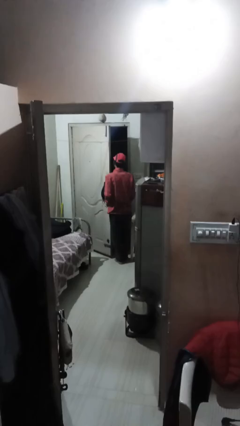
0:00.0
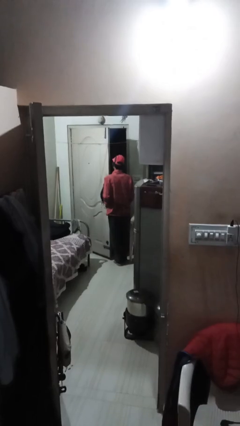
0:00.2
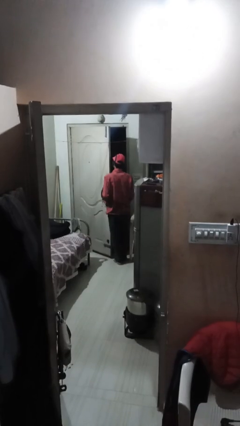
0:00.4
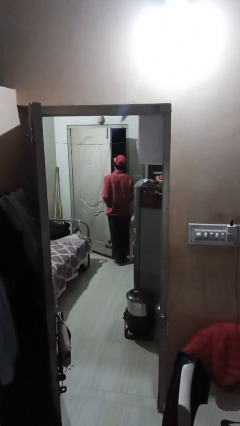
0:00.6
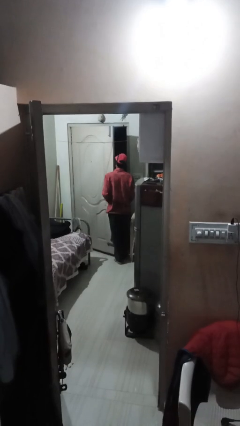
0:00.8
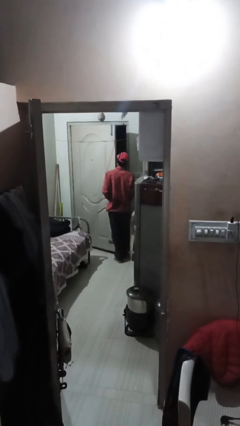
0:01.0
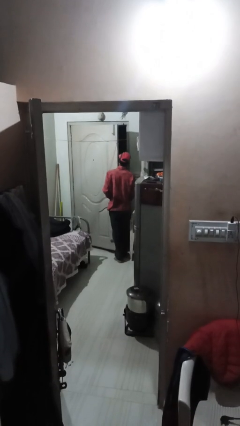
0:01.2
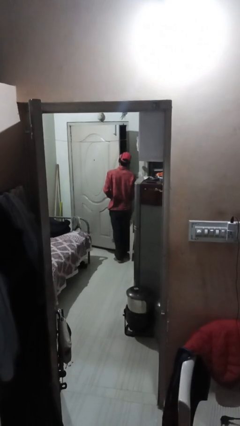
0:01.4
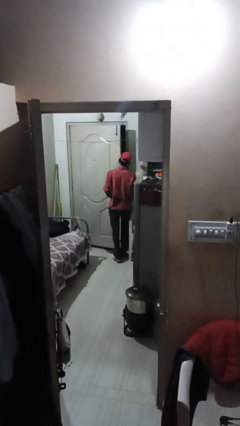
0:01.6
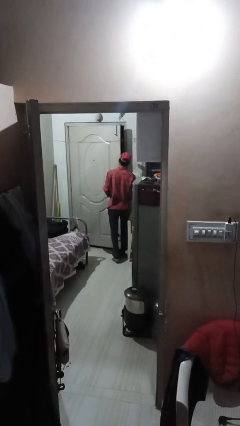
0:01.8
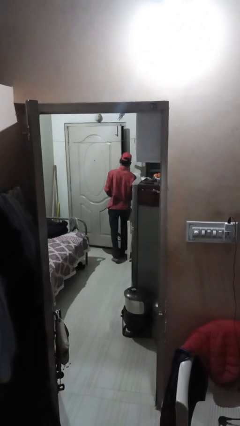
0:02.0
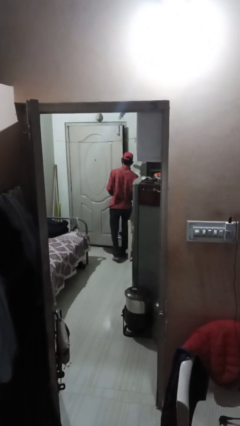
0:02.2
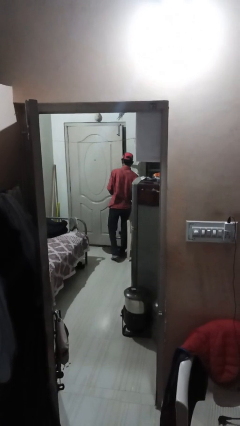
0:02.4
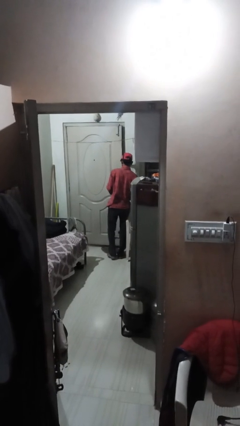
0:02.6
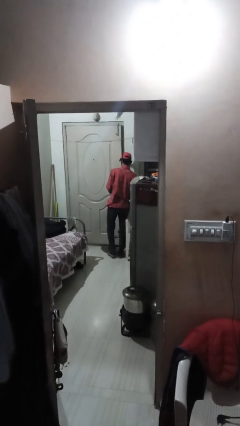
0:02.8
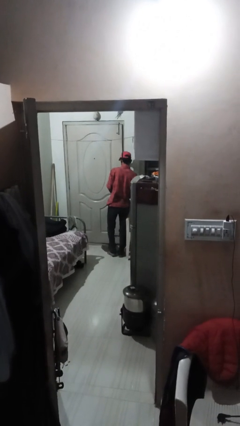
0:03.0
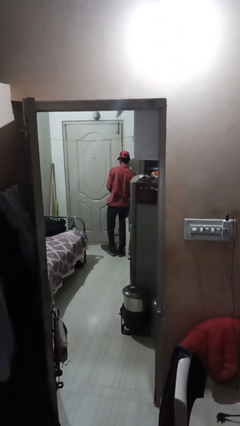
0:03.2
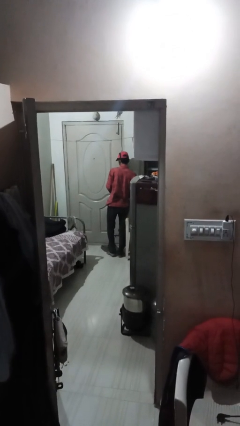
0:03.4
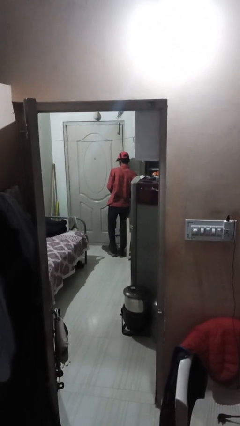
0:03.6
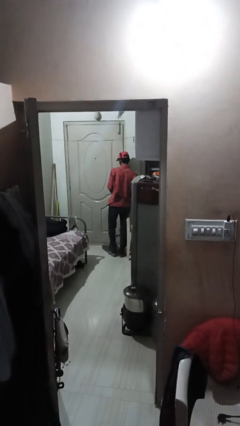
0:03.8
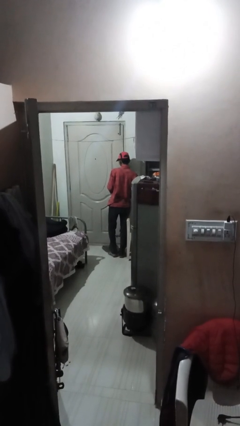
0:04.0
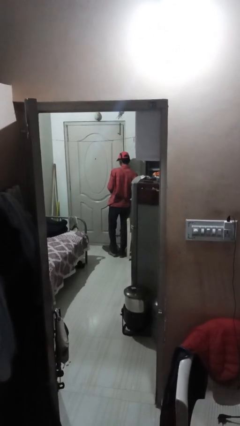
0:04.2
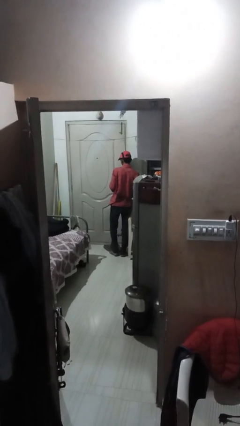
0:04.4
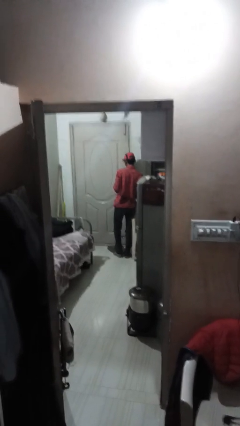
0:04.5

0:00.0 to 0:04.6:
person closes facility door

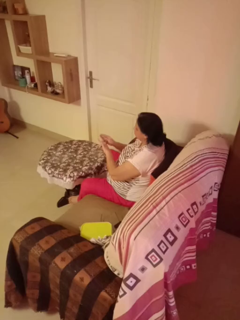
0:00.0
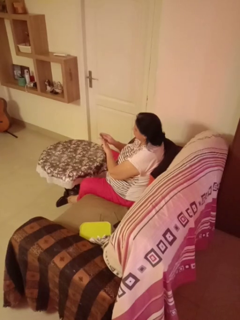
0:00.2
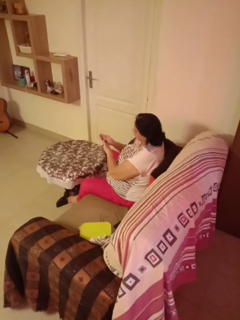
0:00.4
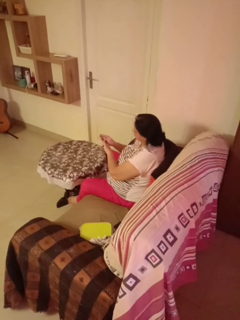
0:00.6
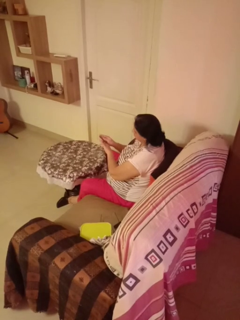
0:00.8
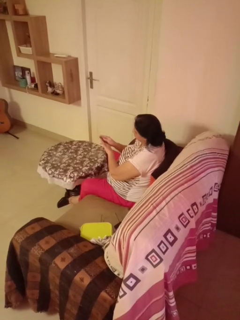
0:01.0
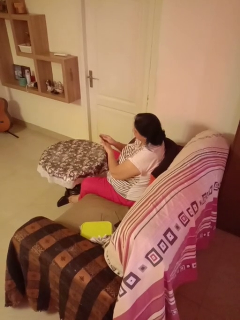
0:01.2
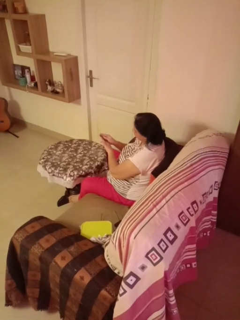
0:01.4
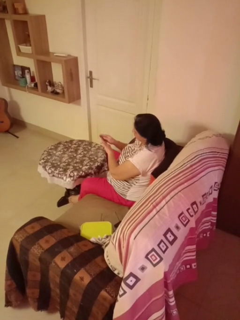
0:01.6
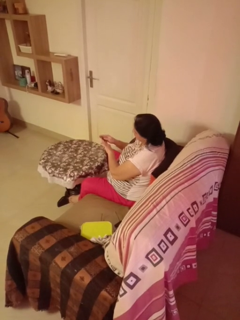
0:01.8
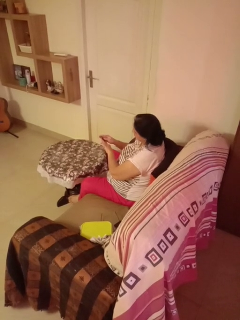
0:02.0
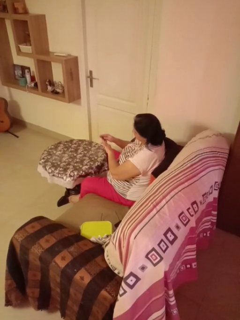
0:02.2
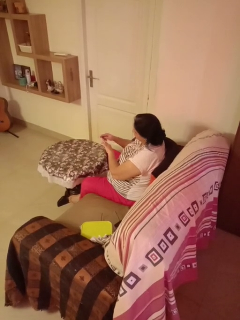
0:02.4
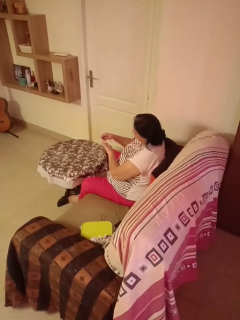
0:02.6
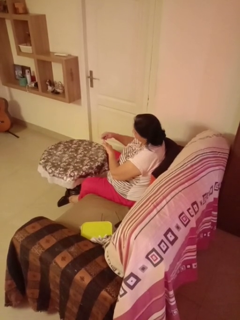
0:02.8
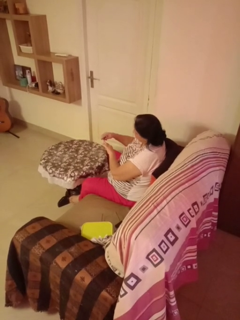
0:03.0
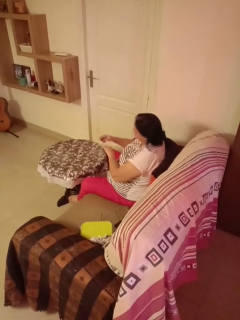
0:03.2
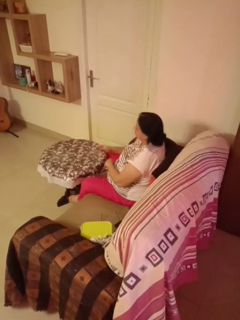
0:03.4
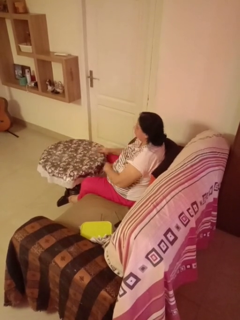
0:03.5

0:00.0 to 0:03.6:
person files fingernails

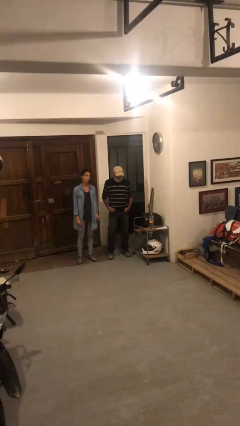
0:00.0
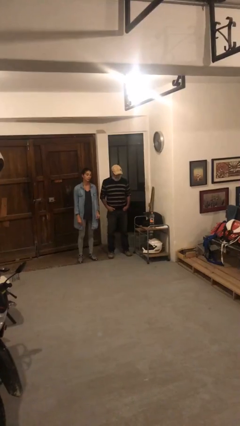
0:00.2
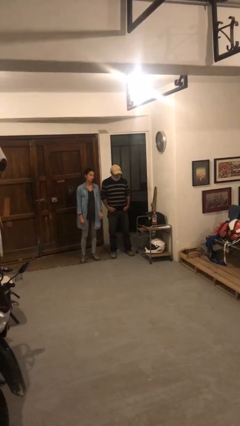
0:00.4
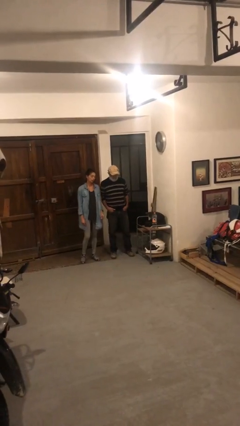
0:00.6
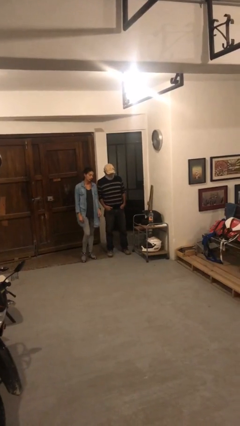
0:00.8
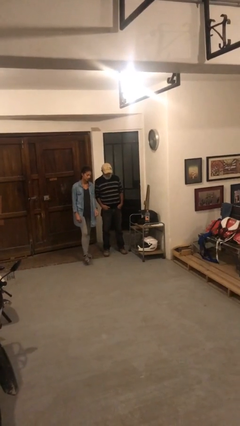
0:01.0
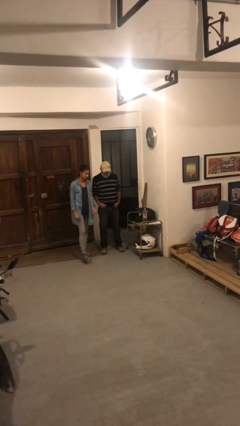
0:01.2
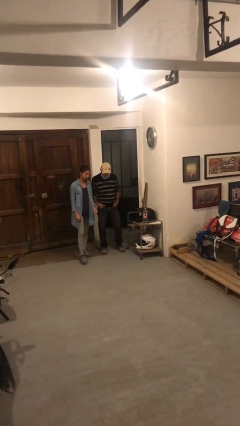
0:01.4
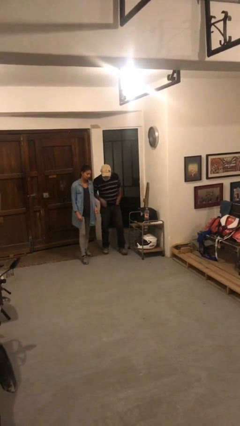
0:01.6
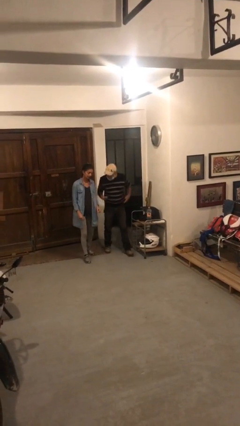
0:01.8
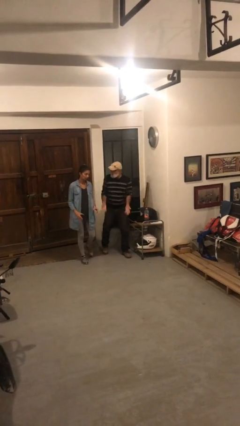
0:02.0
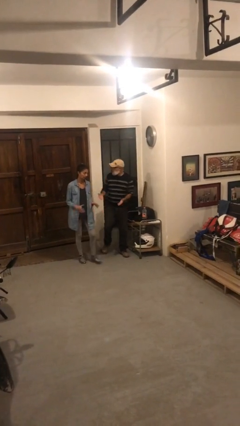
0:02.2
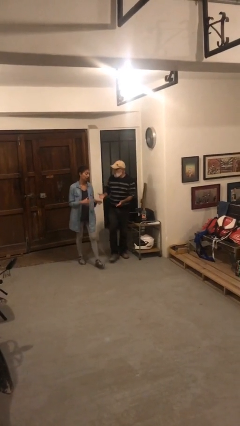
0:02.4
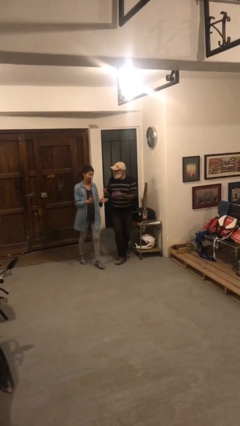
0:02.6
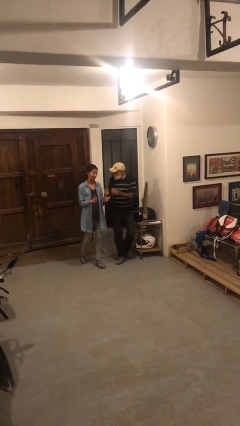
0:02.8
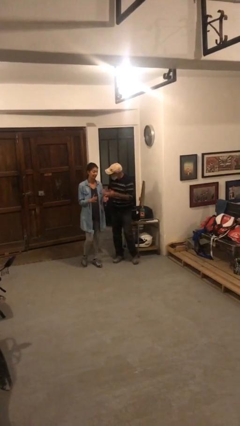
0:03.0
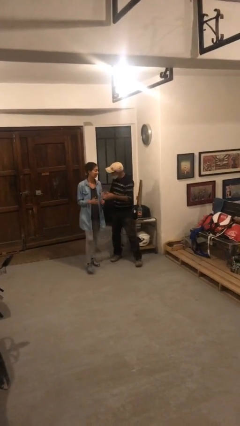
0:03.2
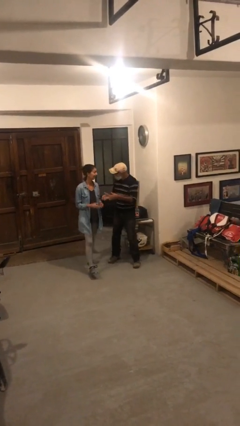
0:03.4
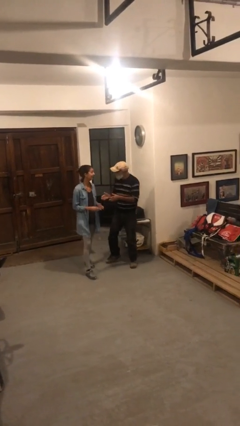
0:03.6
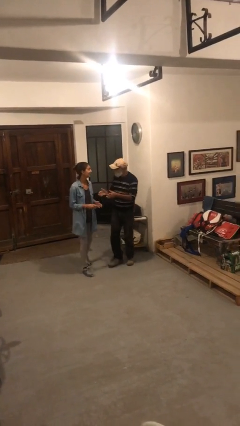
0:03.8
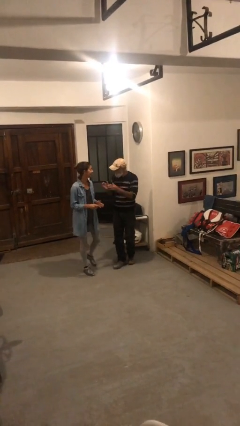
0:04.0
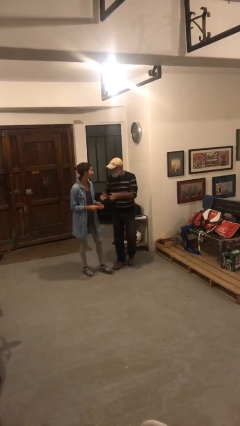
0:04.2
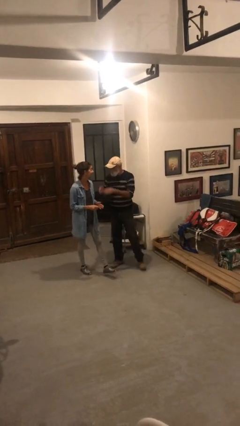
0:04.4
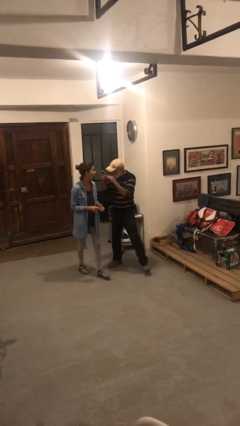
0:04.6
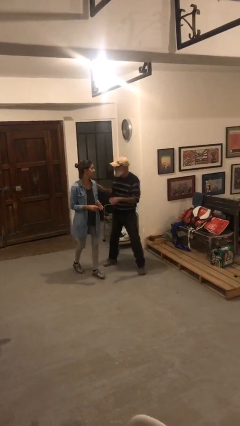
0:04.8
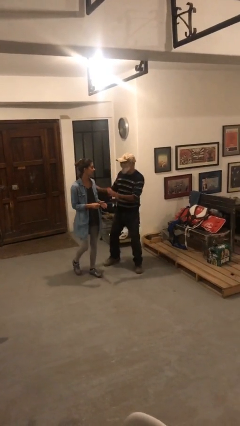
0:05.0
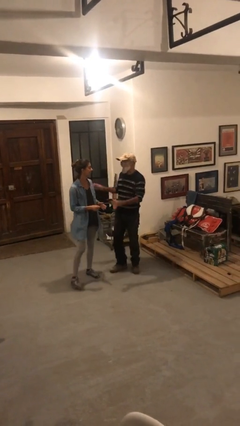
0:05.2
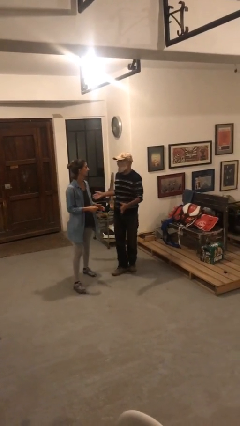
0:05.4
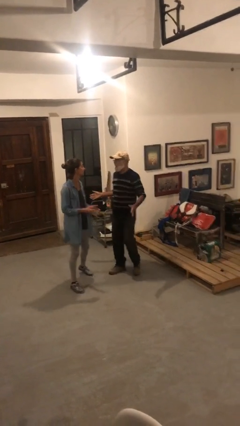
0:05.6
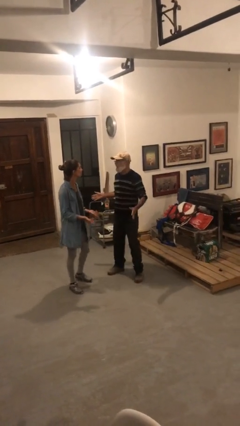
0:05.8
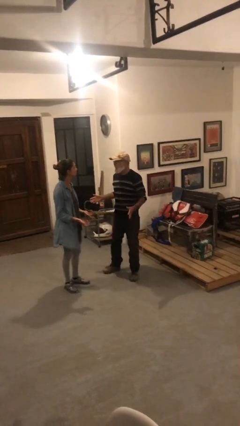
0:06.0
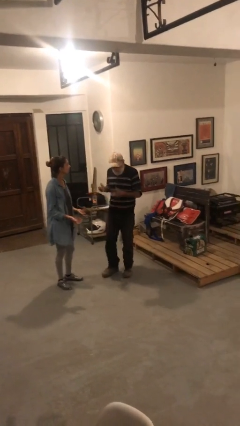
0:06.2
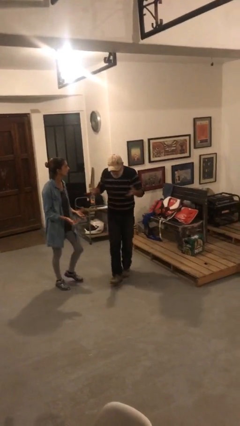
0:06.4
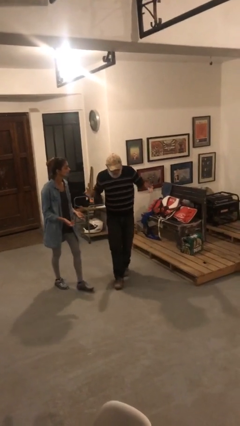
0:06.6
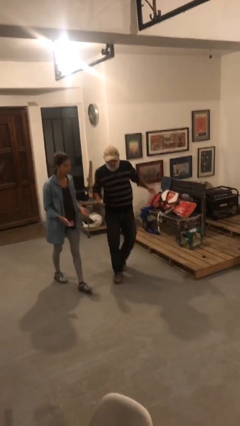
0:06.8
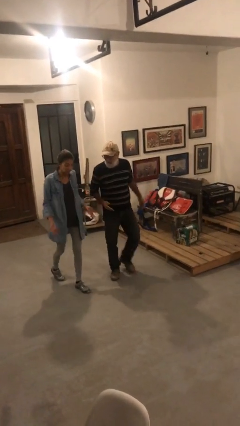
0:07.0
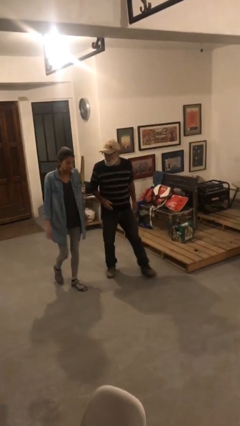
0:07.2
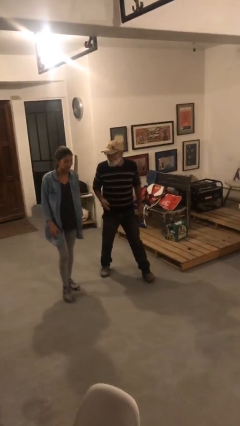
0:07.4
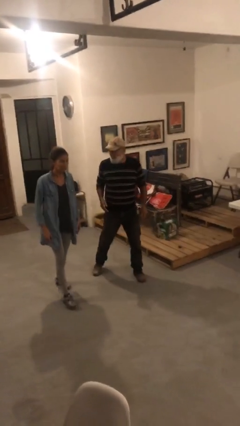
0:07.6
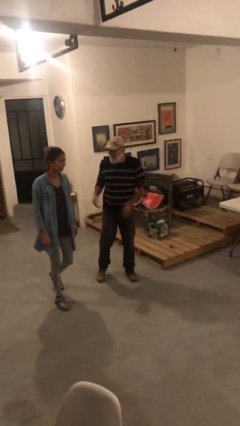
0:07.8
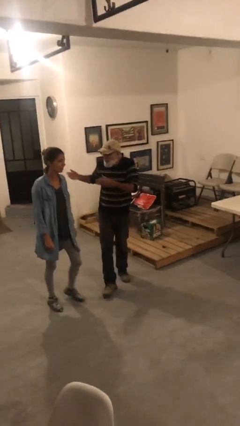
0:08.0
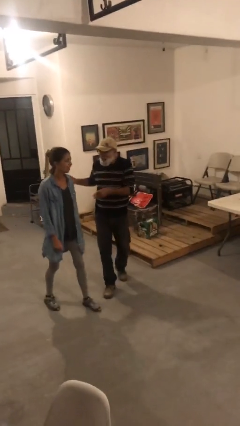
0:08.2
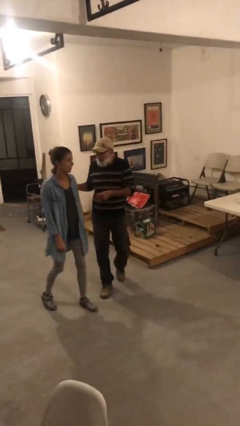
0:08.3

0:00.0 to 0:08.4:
person talks to person

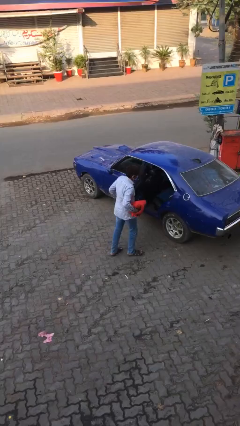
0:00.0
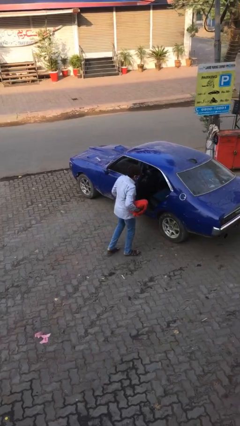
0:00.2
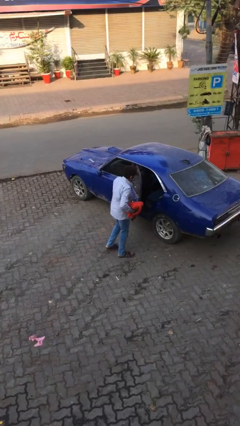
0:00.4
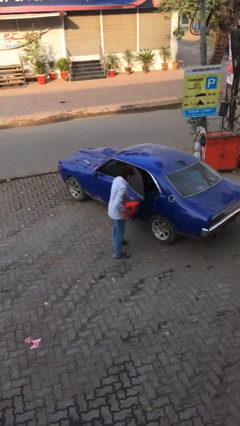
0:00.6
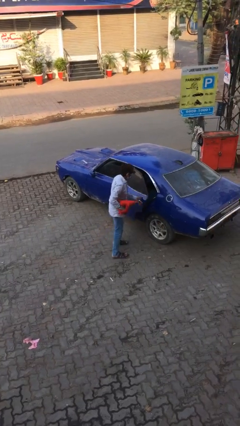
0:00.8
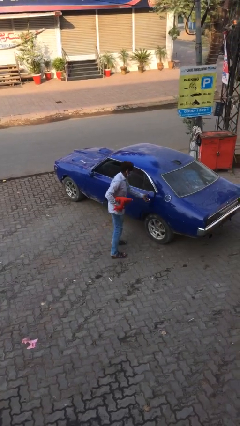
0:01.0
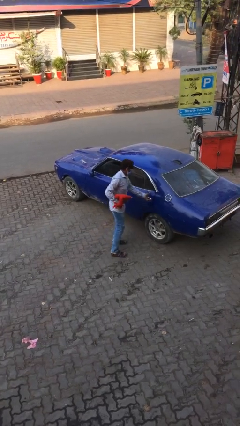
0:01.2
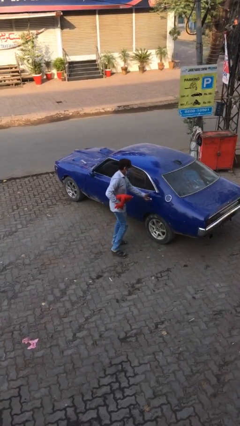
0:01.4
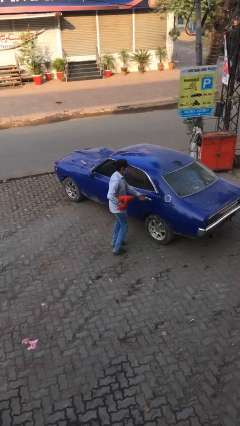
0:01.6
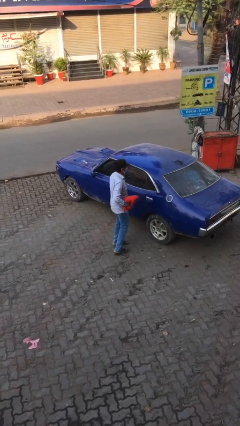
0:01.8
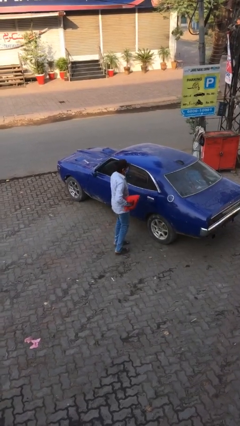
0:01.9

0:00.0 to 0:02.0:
person closes car door
